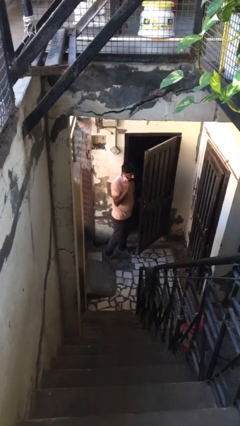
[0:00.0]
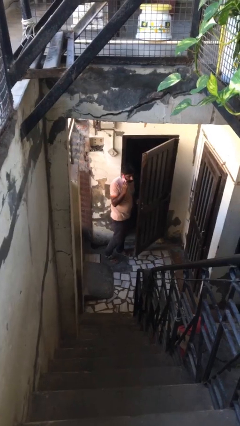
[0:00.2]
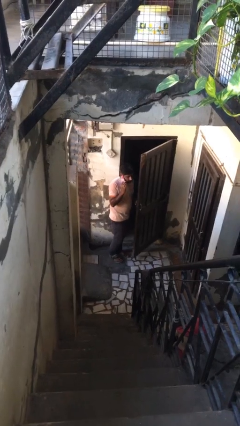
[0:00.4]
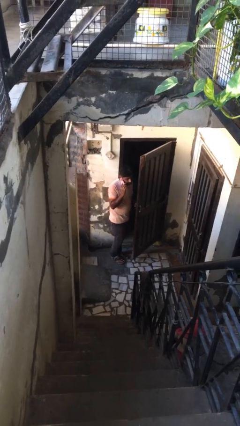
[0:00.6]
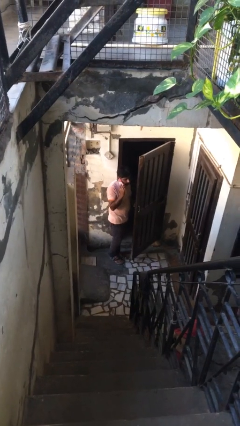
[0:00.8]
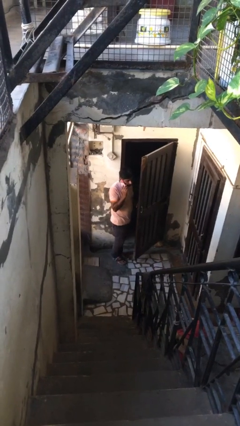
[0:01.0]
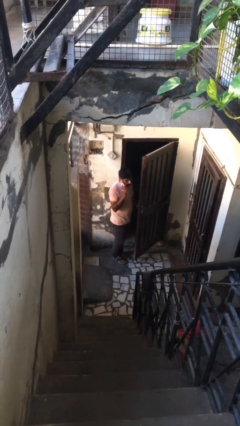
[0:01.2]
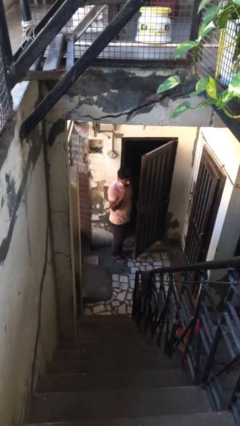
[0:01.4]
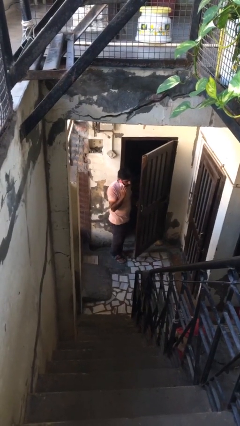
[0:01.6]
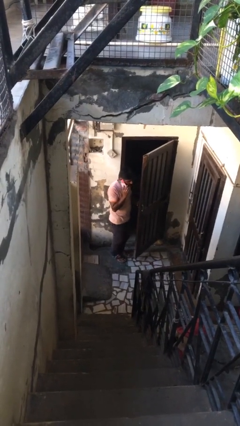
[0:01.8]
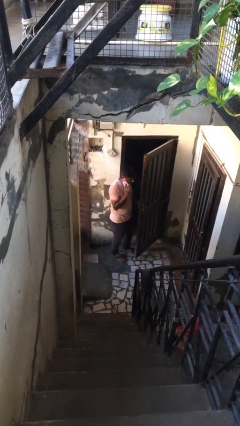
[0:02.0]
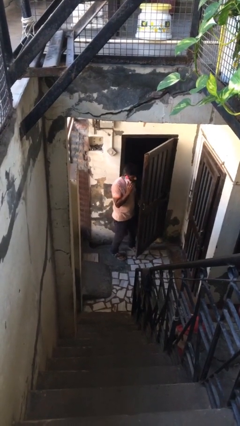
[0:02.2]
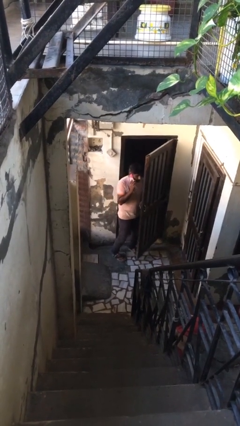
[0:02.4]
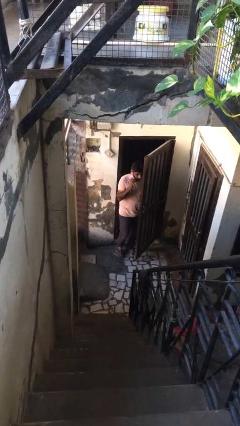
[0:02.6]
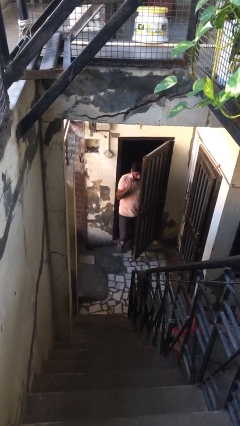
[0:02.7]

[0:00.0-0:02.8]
person exits scene through structure

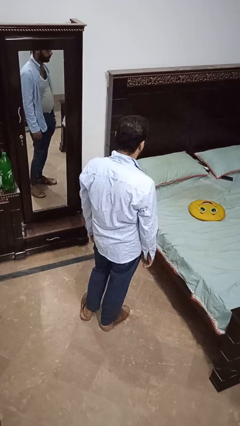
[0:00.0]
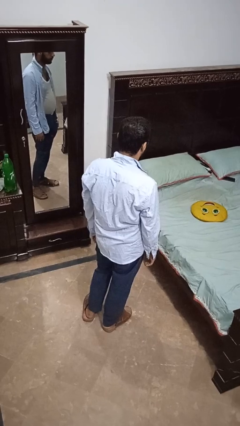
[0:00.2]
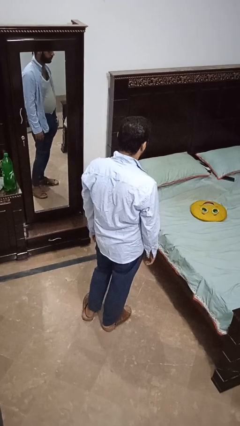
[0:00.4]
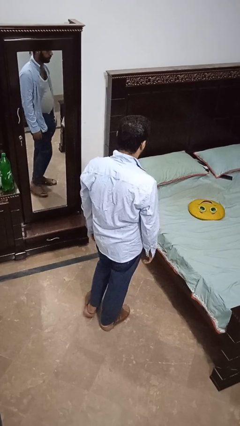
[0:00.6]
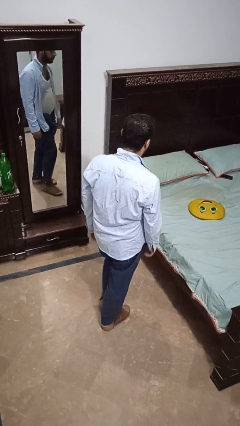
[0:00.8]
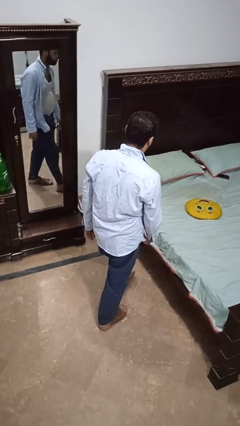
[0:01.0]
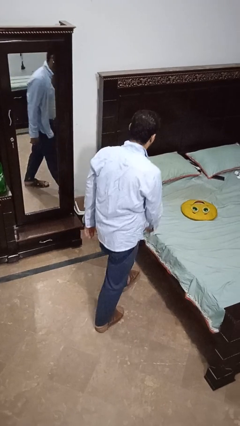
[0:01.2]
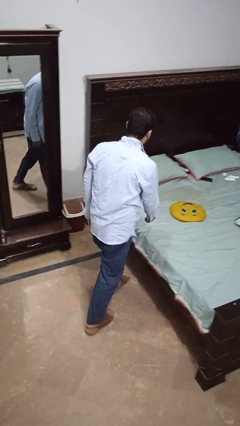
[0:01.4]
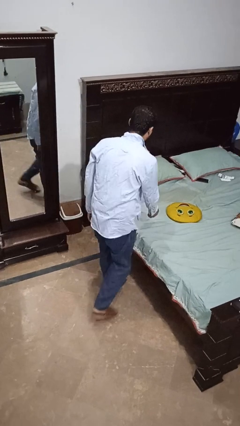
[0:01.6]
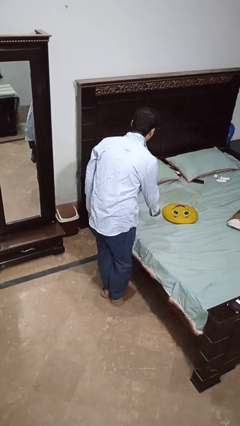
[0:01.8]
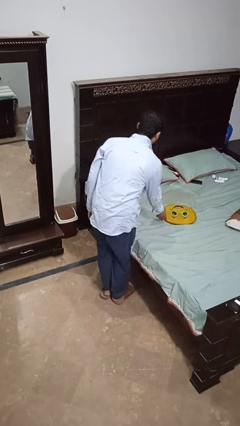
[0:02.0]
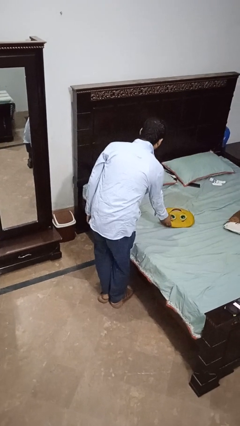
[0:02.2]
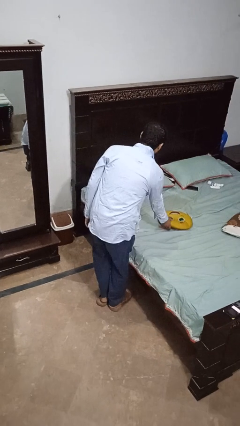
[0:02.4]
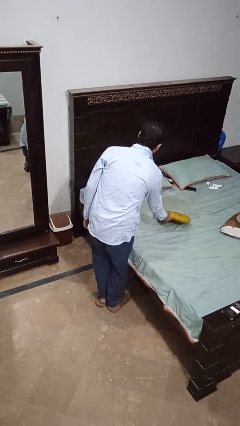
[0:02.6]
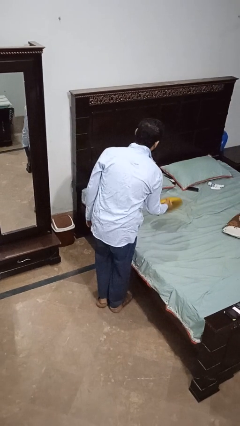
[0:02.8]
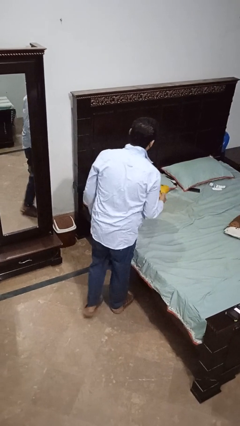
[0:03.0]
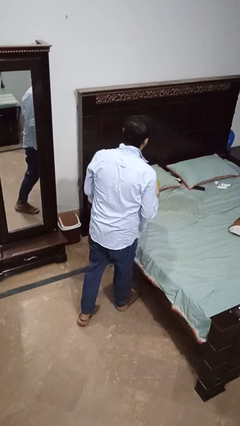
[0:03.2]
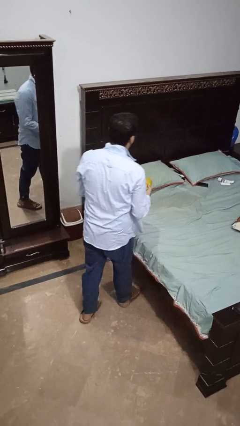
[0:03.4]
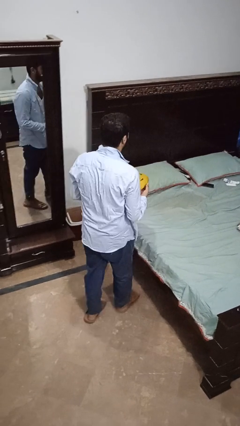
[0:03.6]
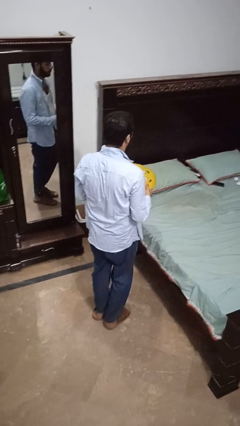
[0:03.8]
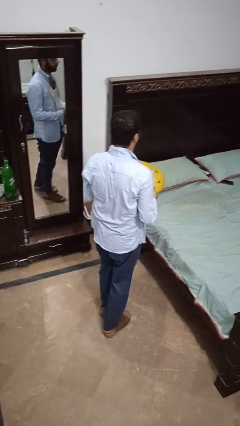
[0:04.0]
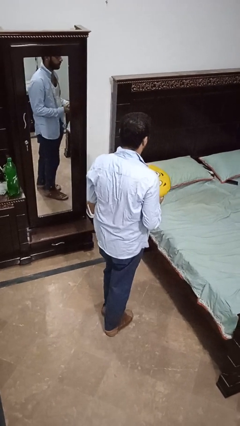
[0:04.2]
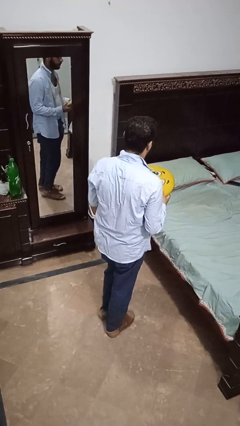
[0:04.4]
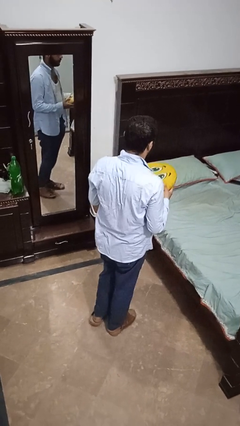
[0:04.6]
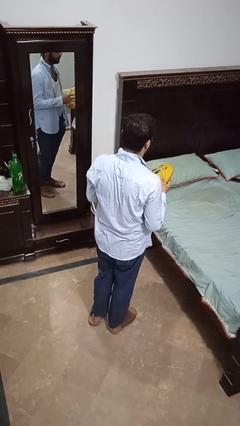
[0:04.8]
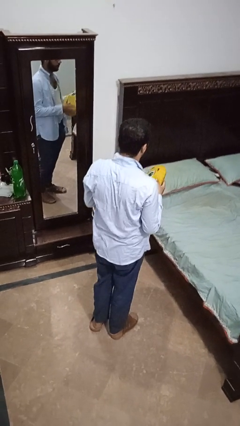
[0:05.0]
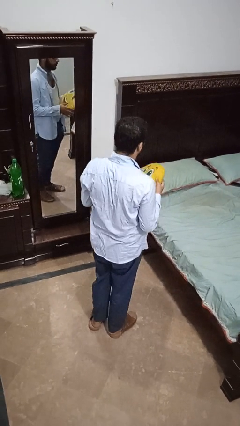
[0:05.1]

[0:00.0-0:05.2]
person picks up object from bed

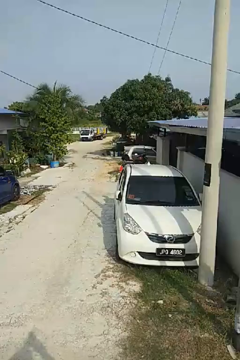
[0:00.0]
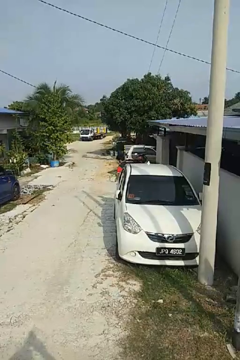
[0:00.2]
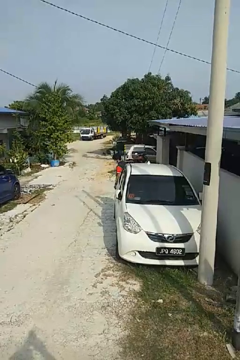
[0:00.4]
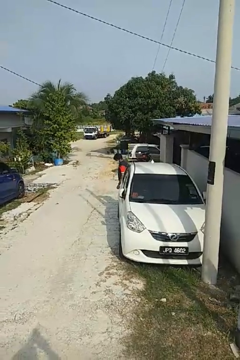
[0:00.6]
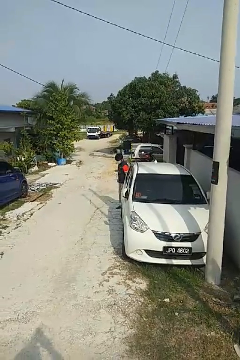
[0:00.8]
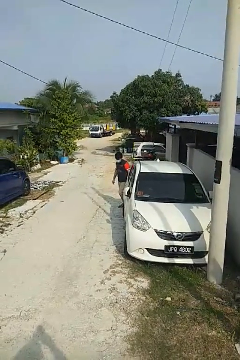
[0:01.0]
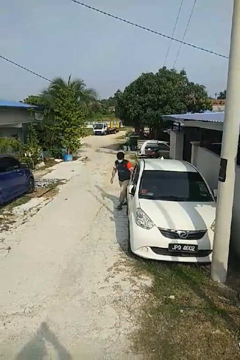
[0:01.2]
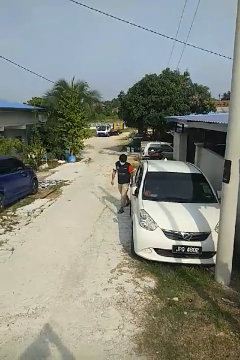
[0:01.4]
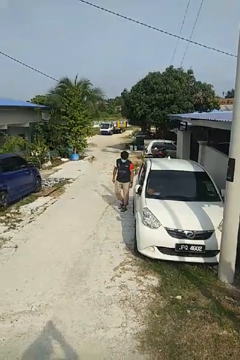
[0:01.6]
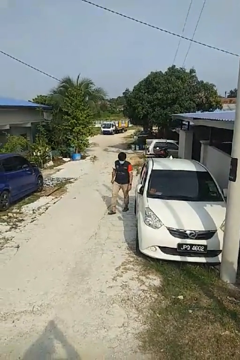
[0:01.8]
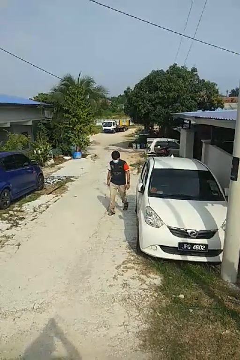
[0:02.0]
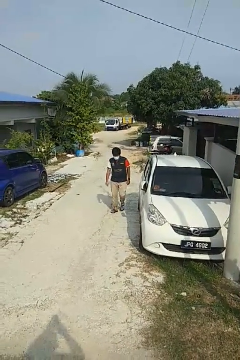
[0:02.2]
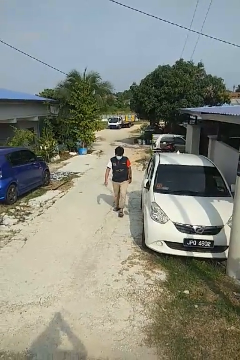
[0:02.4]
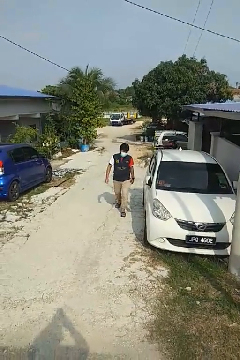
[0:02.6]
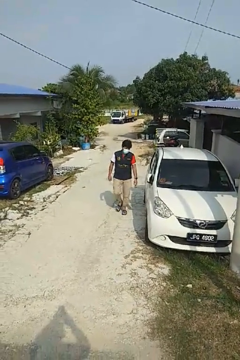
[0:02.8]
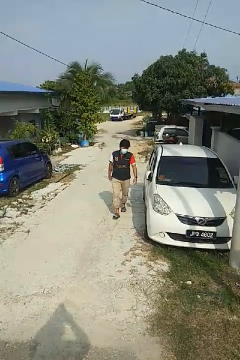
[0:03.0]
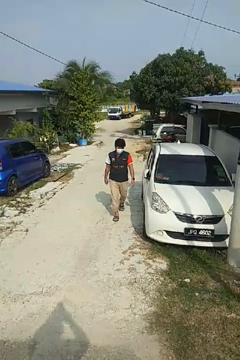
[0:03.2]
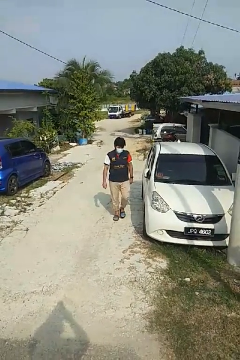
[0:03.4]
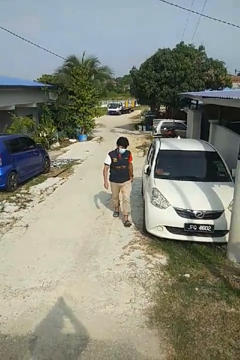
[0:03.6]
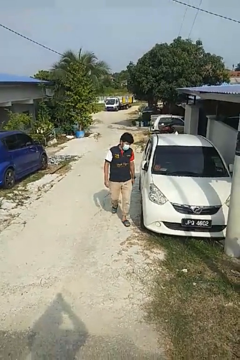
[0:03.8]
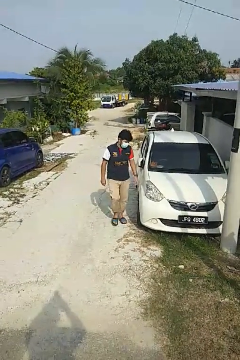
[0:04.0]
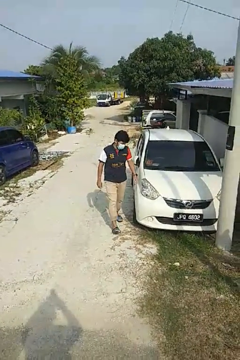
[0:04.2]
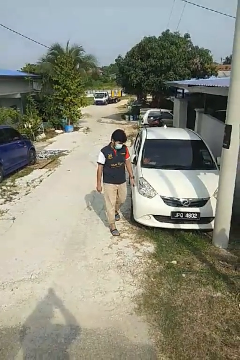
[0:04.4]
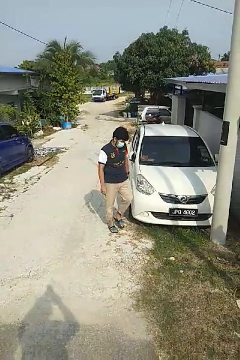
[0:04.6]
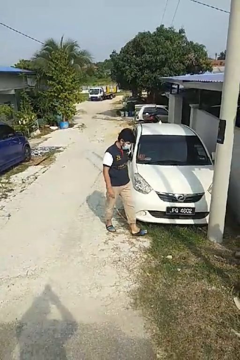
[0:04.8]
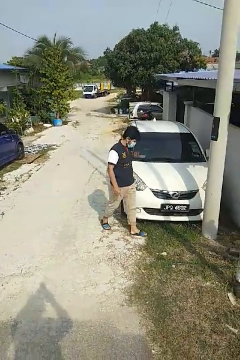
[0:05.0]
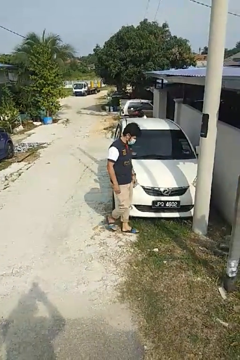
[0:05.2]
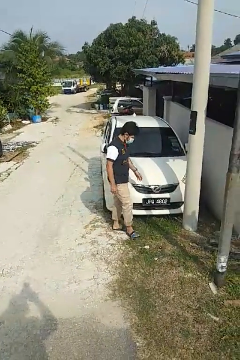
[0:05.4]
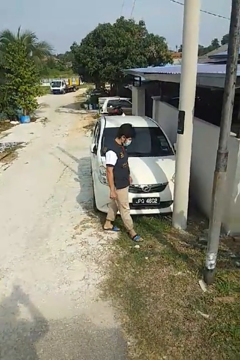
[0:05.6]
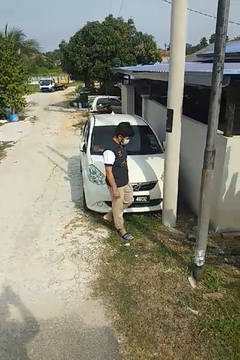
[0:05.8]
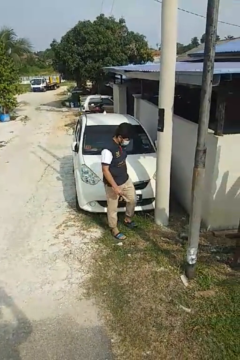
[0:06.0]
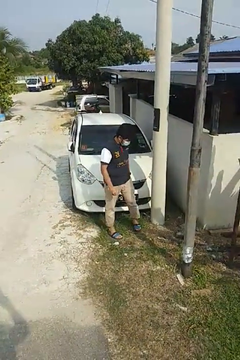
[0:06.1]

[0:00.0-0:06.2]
person walks around car

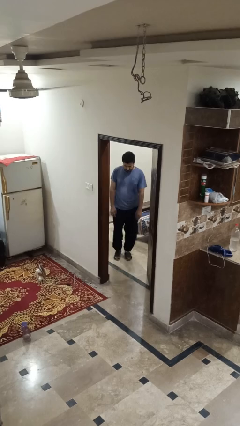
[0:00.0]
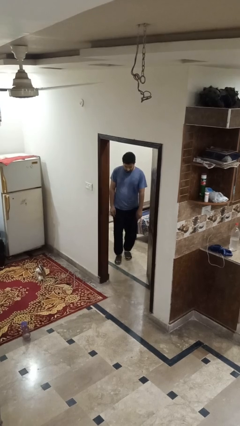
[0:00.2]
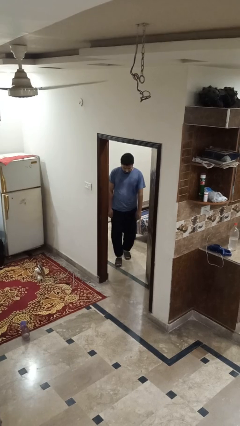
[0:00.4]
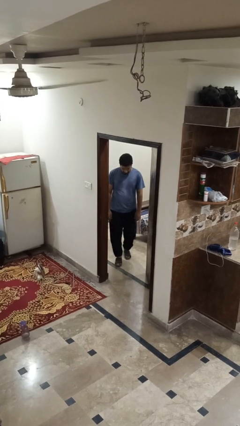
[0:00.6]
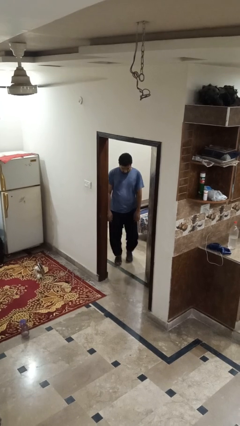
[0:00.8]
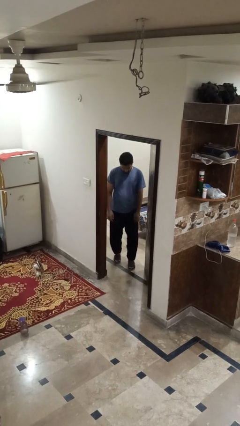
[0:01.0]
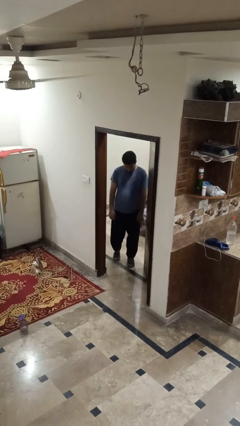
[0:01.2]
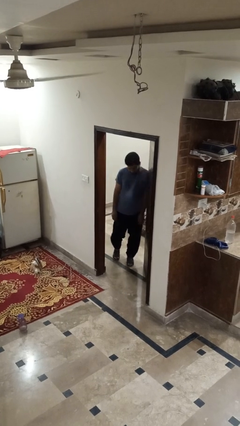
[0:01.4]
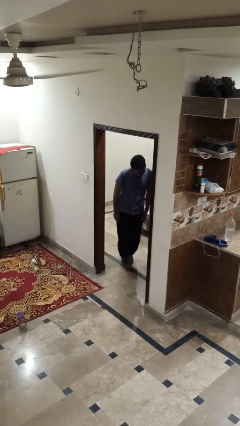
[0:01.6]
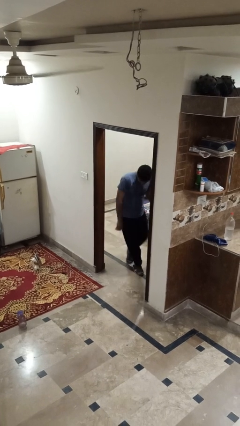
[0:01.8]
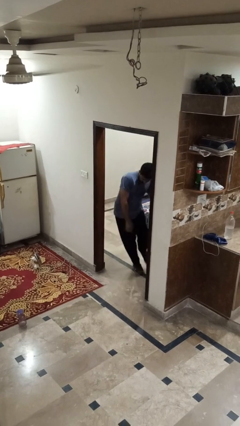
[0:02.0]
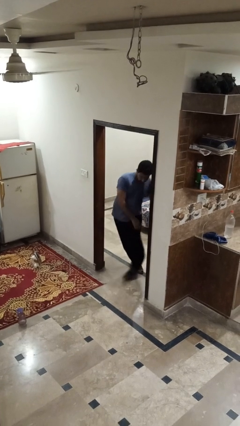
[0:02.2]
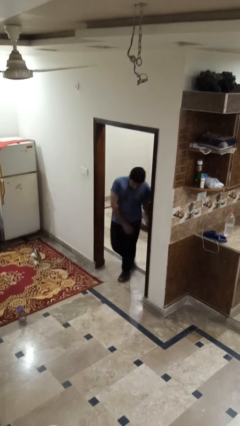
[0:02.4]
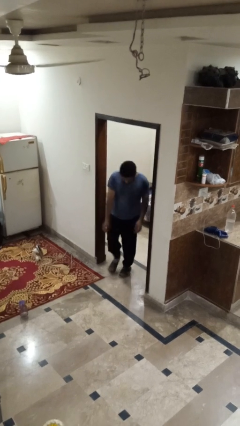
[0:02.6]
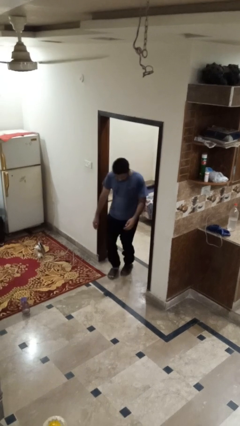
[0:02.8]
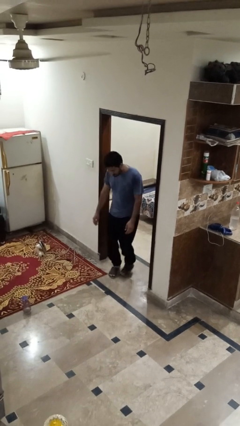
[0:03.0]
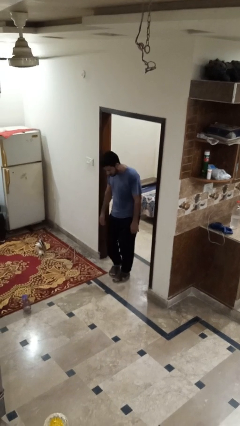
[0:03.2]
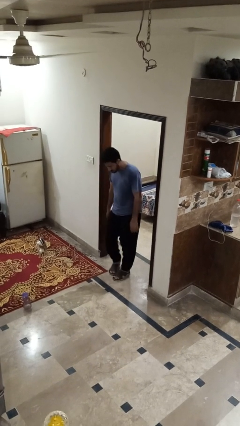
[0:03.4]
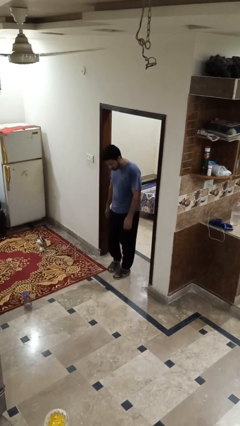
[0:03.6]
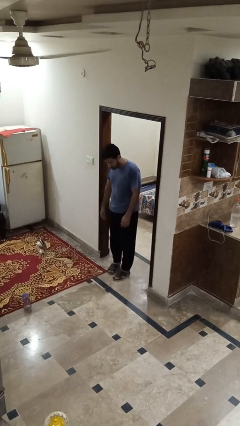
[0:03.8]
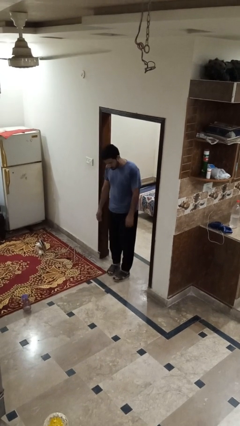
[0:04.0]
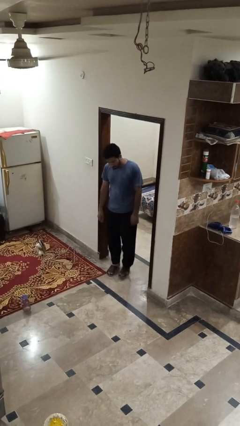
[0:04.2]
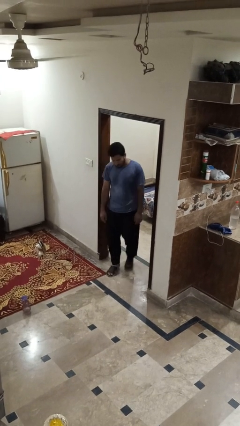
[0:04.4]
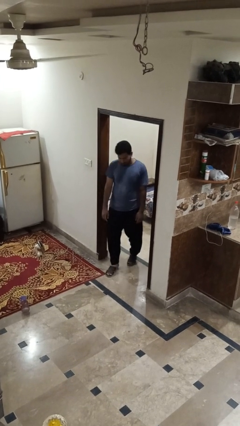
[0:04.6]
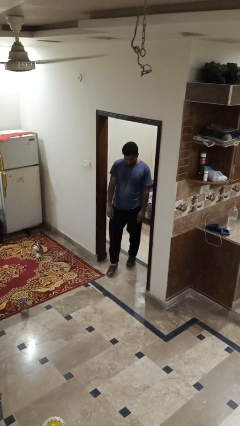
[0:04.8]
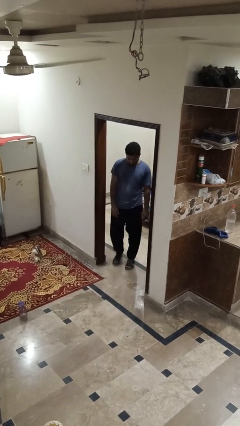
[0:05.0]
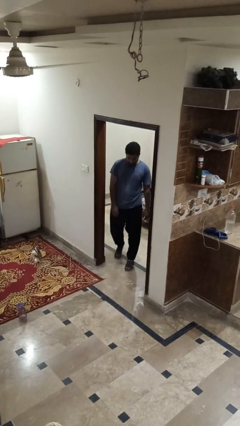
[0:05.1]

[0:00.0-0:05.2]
person bumps into wall
